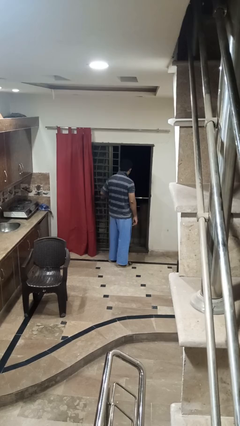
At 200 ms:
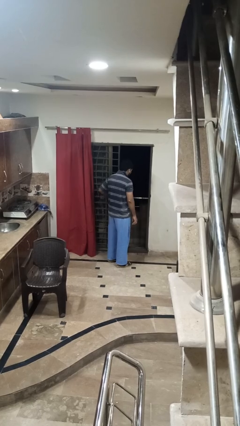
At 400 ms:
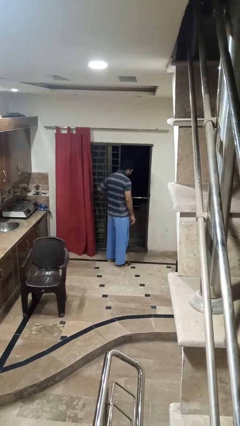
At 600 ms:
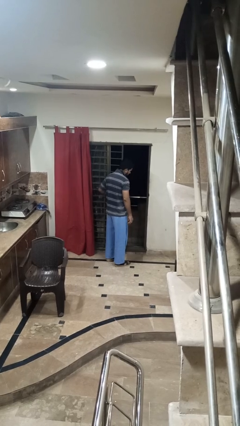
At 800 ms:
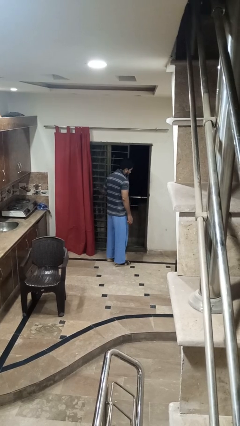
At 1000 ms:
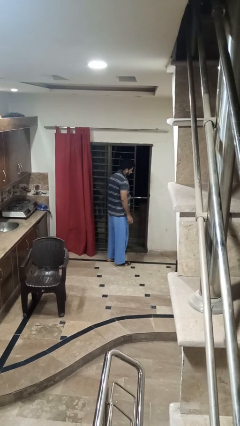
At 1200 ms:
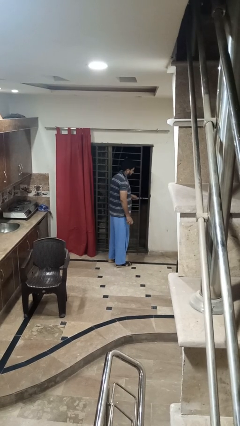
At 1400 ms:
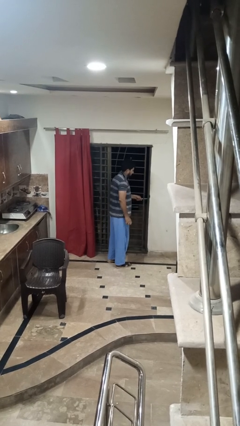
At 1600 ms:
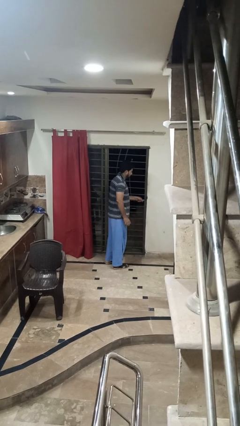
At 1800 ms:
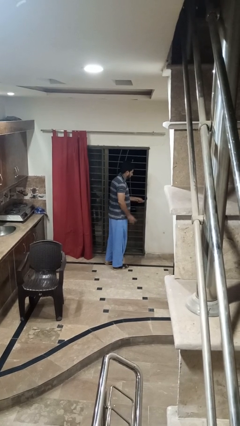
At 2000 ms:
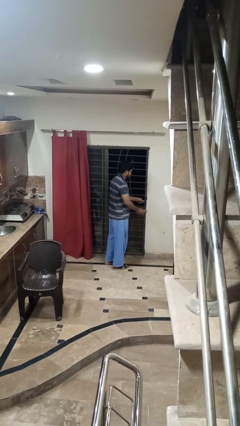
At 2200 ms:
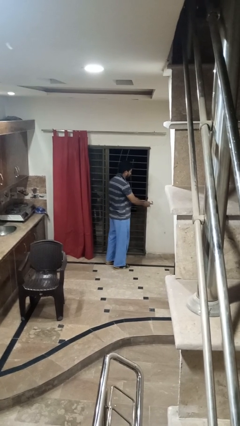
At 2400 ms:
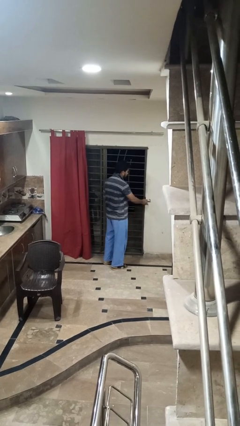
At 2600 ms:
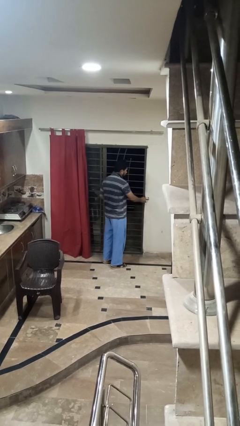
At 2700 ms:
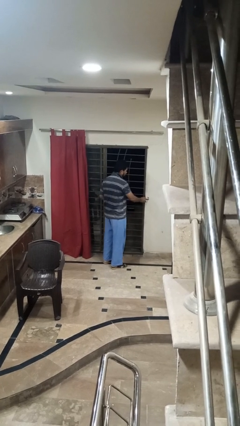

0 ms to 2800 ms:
person closes facility door

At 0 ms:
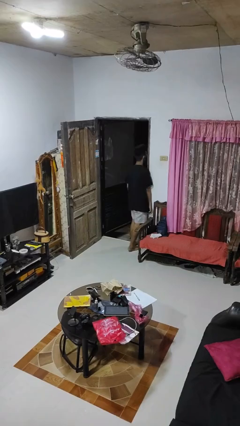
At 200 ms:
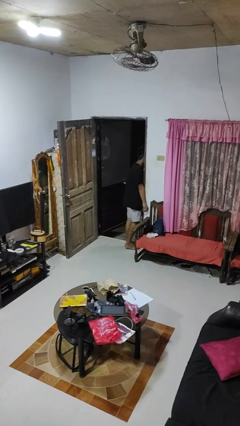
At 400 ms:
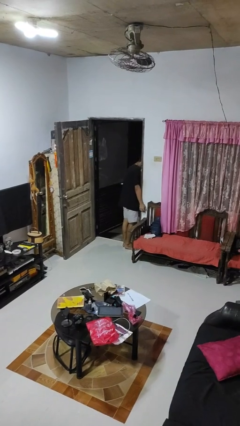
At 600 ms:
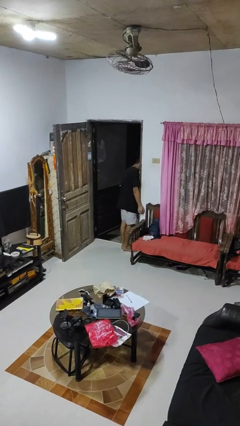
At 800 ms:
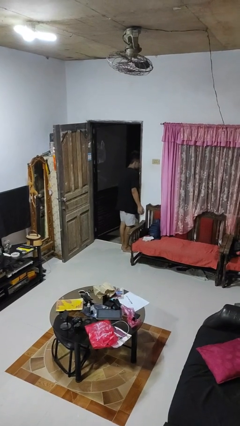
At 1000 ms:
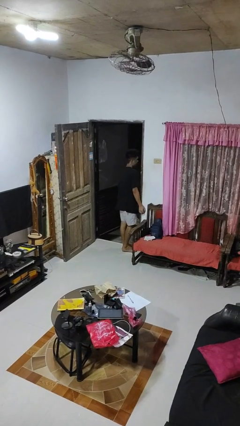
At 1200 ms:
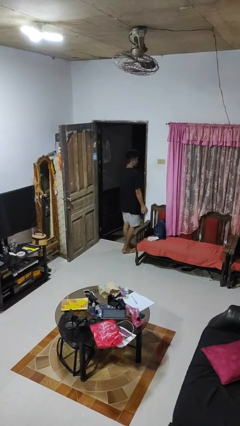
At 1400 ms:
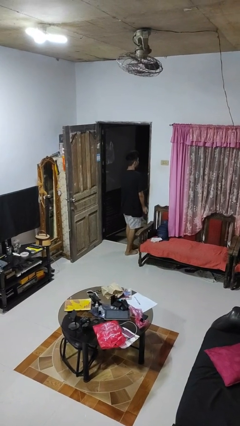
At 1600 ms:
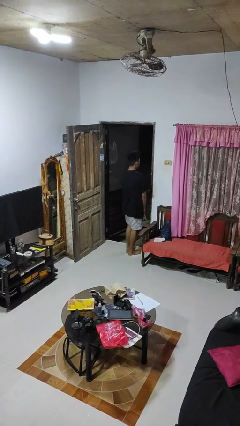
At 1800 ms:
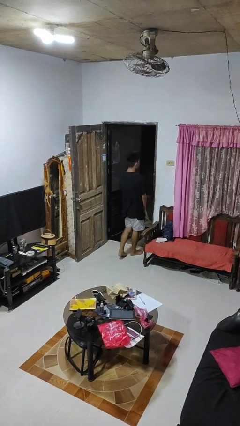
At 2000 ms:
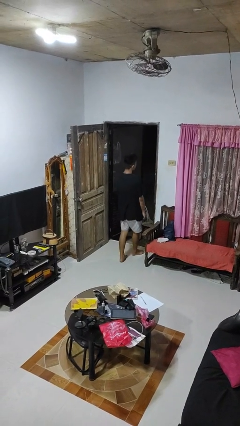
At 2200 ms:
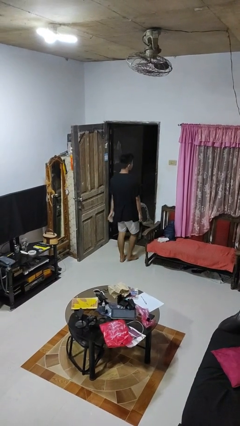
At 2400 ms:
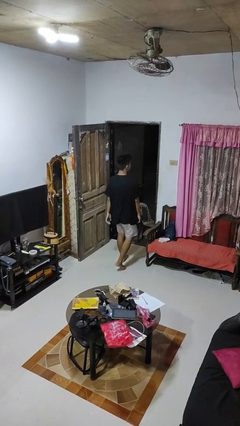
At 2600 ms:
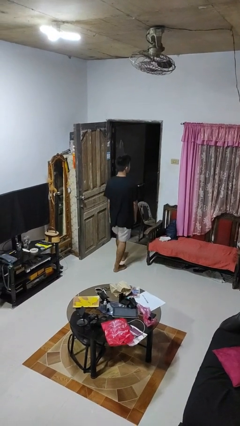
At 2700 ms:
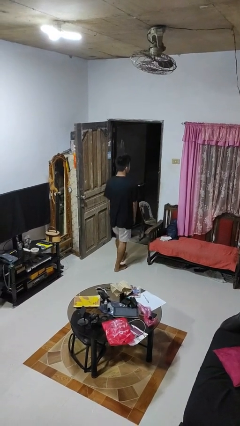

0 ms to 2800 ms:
person bumps into wall

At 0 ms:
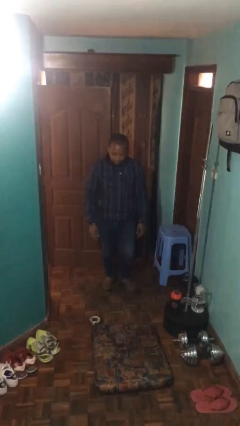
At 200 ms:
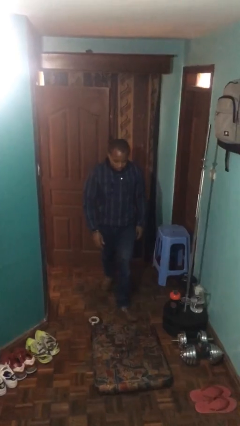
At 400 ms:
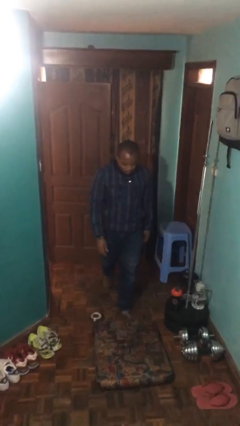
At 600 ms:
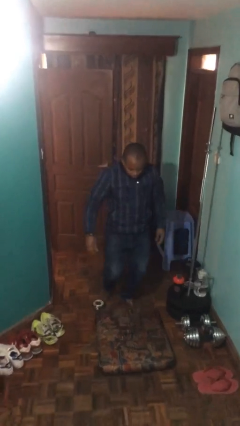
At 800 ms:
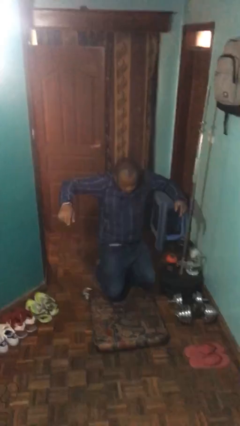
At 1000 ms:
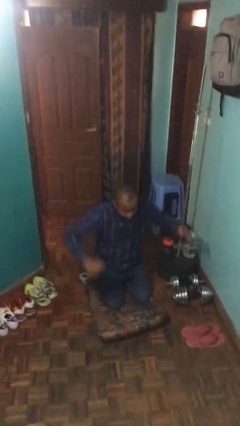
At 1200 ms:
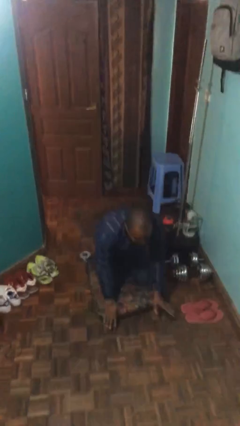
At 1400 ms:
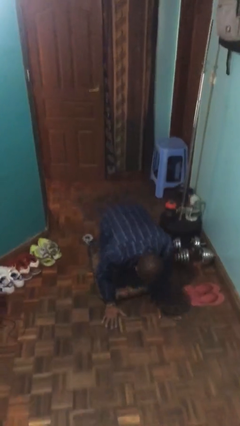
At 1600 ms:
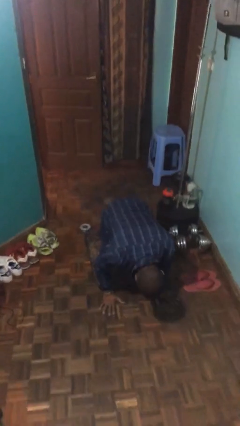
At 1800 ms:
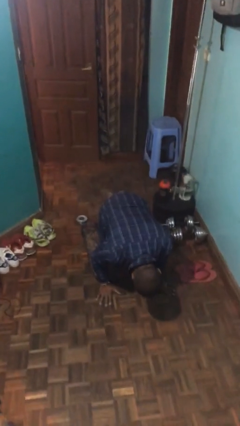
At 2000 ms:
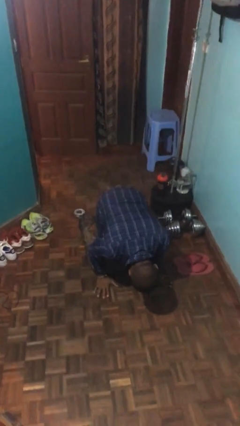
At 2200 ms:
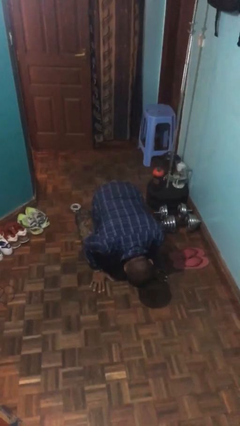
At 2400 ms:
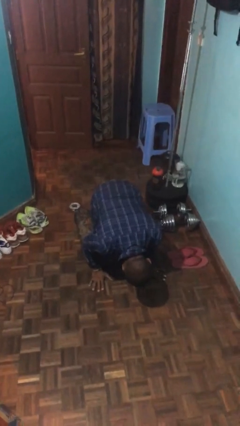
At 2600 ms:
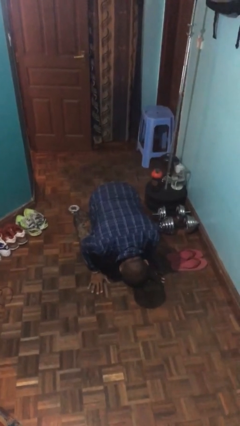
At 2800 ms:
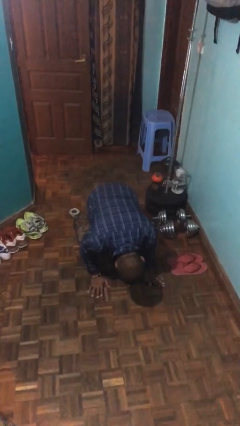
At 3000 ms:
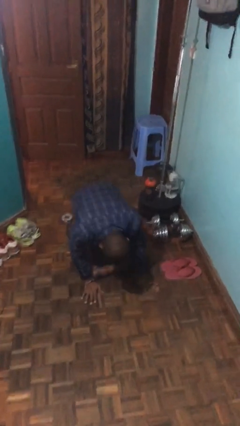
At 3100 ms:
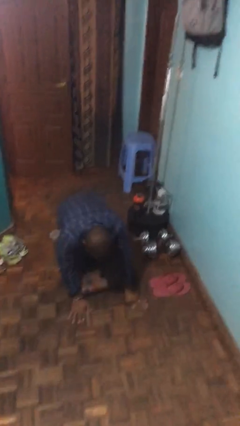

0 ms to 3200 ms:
person trips on object on floor

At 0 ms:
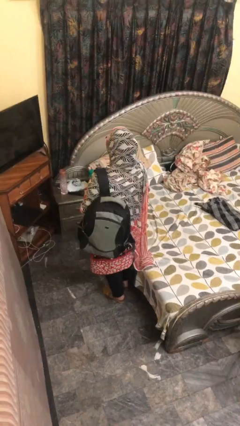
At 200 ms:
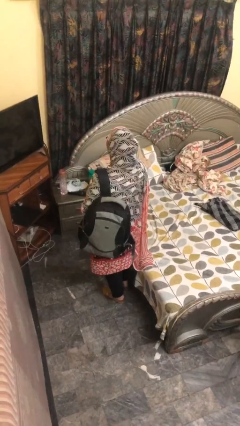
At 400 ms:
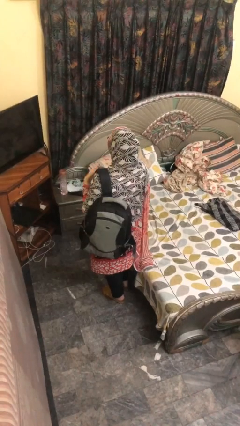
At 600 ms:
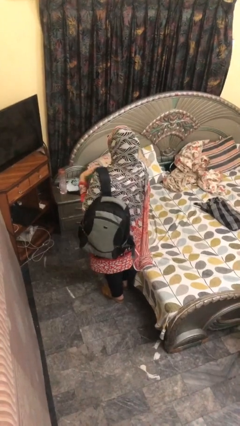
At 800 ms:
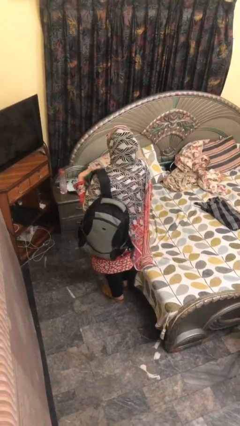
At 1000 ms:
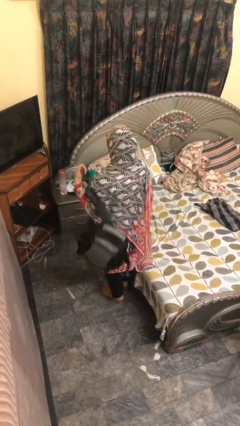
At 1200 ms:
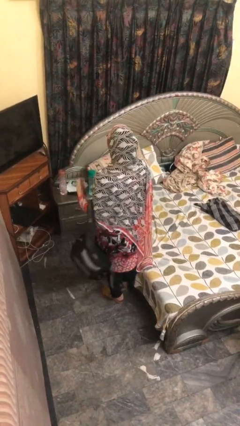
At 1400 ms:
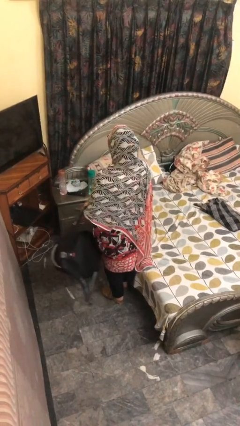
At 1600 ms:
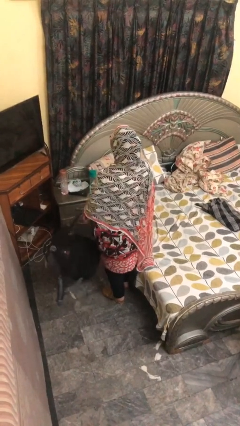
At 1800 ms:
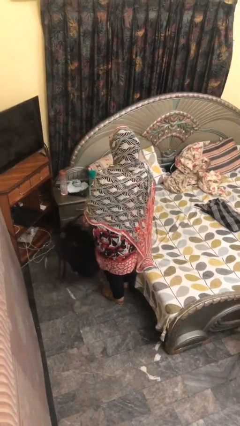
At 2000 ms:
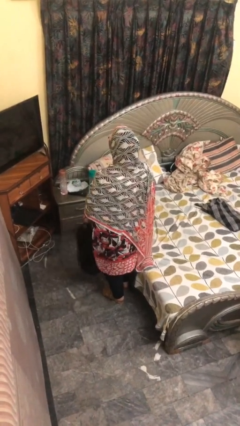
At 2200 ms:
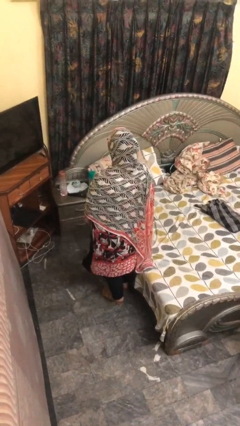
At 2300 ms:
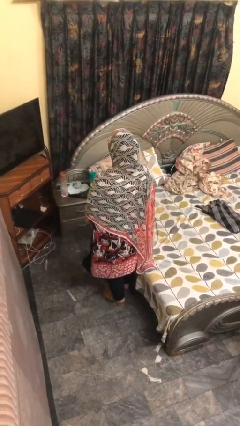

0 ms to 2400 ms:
person takes off backpack

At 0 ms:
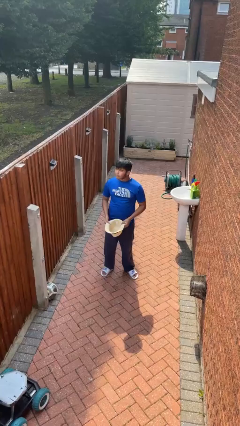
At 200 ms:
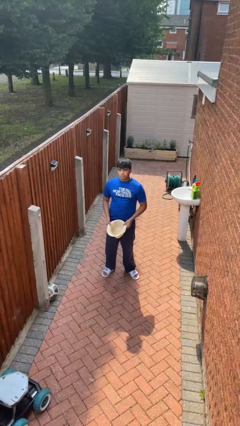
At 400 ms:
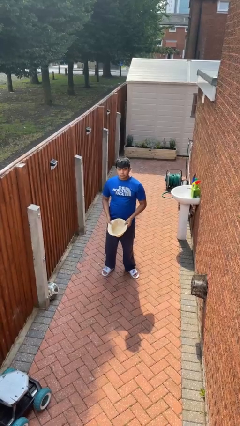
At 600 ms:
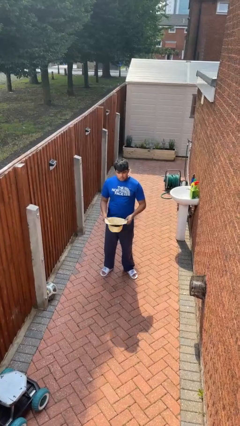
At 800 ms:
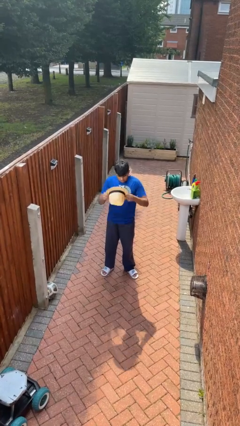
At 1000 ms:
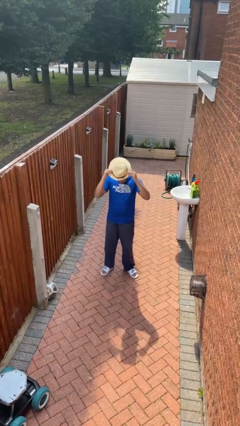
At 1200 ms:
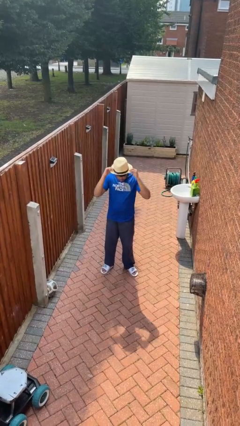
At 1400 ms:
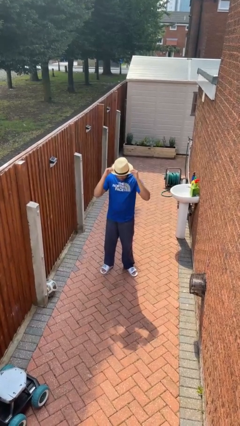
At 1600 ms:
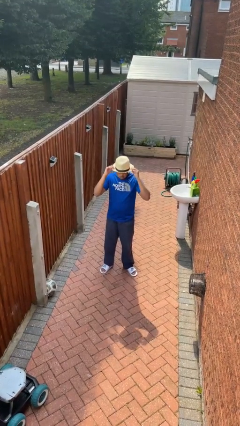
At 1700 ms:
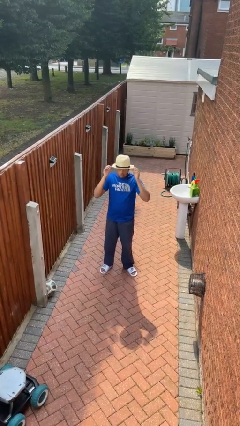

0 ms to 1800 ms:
person puts on hat

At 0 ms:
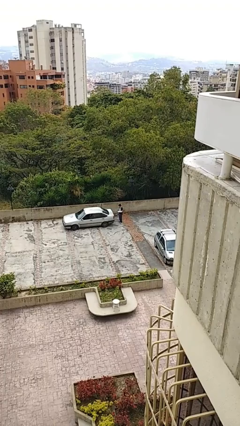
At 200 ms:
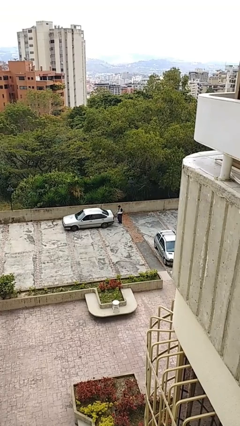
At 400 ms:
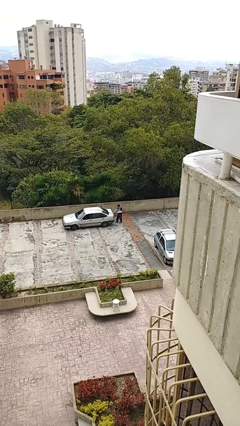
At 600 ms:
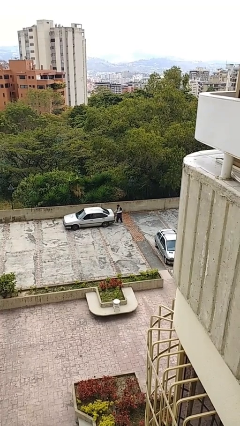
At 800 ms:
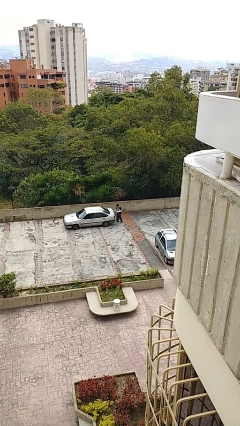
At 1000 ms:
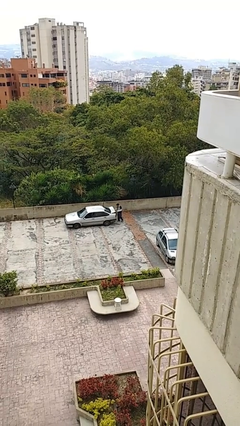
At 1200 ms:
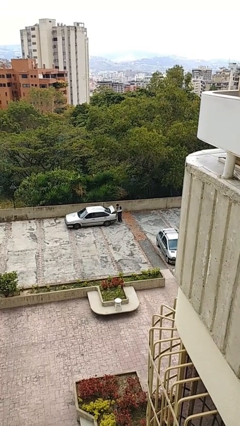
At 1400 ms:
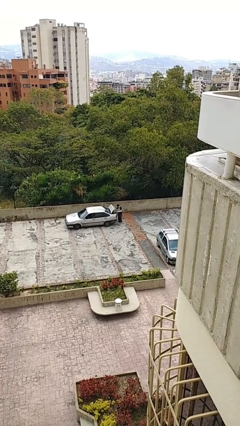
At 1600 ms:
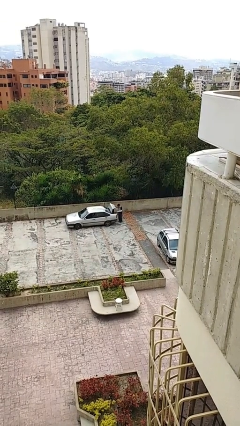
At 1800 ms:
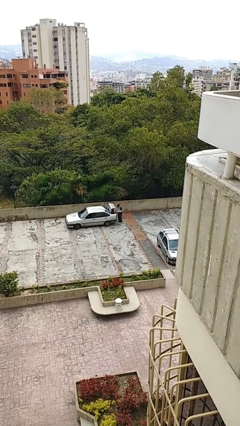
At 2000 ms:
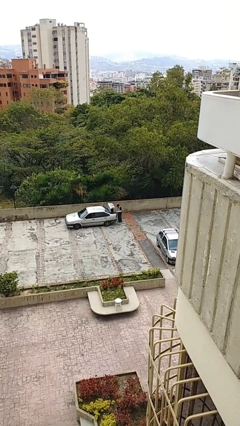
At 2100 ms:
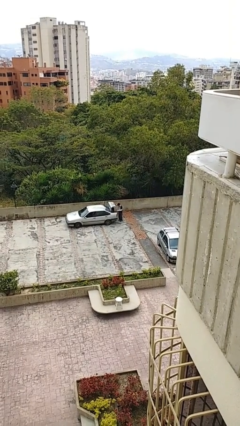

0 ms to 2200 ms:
person opens car trunk

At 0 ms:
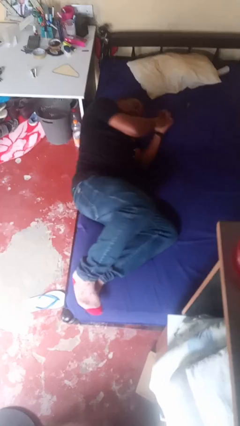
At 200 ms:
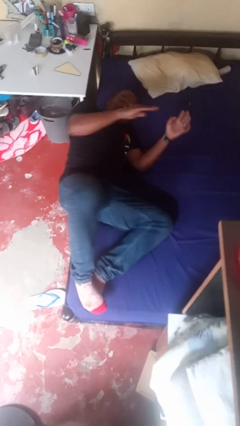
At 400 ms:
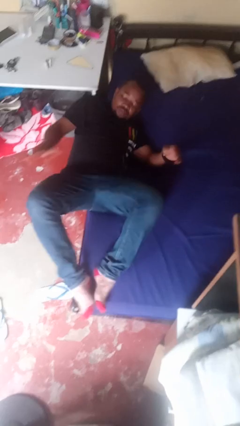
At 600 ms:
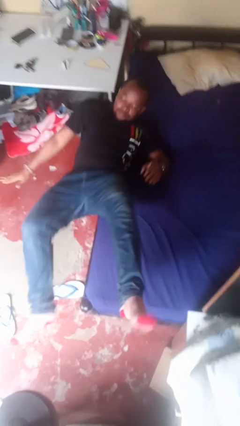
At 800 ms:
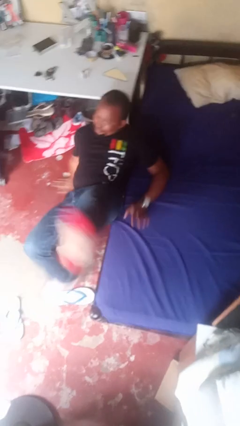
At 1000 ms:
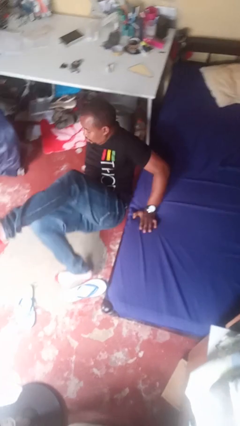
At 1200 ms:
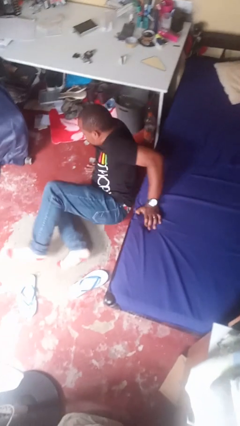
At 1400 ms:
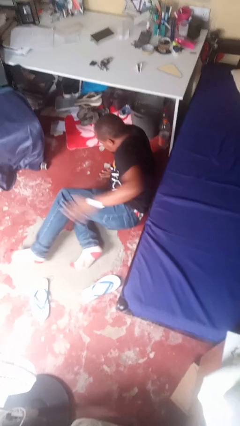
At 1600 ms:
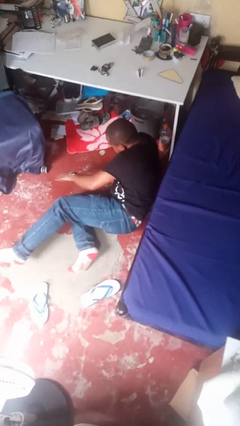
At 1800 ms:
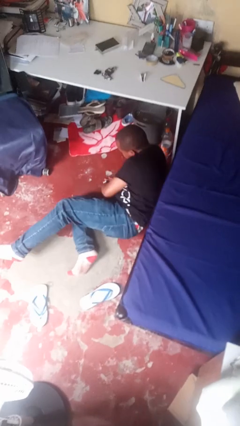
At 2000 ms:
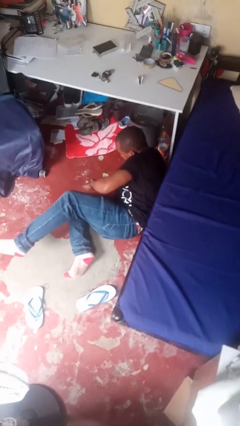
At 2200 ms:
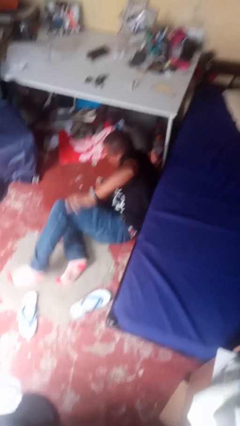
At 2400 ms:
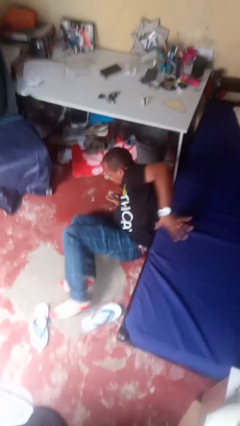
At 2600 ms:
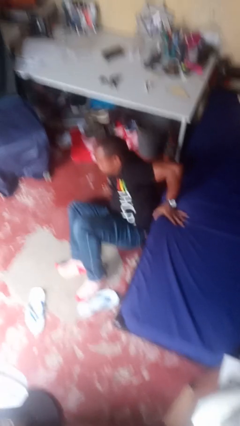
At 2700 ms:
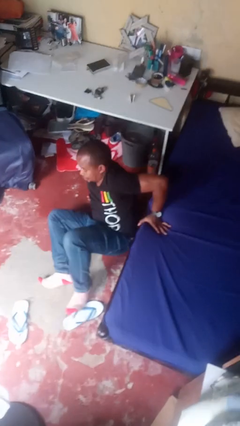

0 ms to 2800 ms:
person falls from bed
